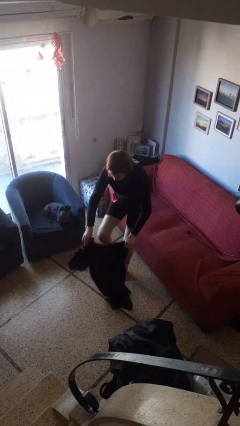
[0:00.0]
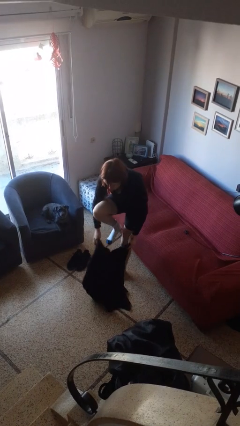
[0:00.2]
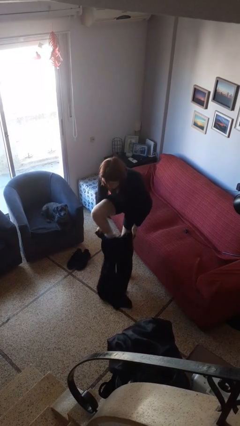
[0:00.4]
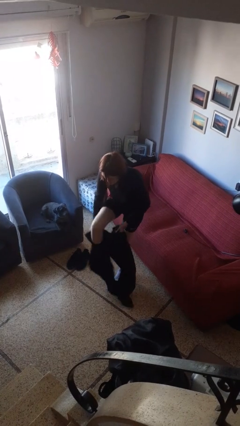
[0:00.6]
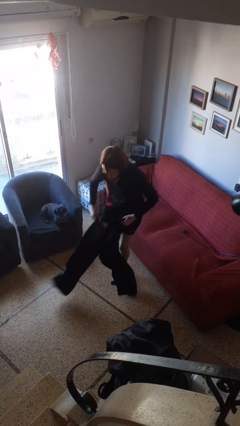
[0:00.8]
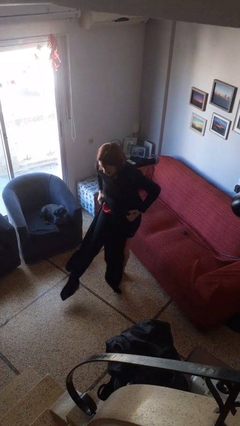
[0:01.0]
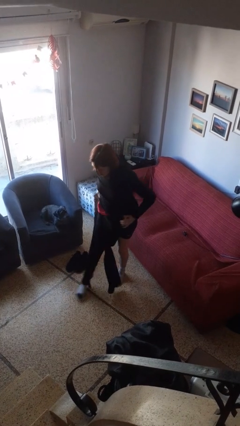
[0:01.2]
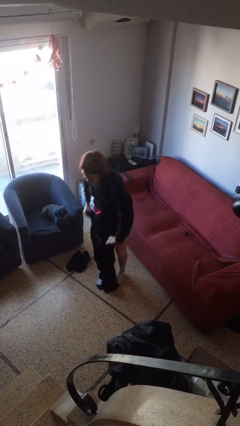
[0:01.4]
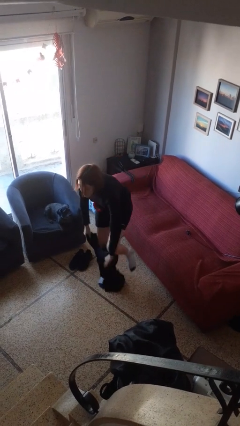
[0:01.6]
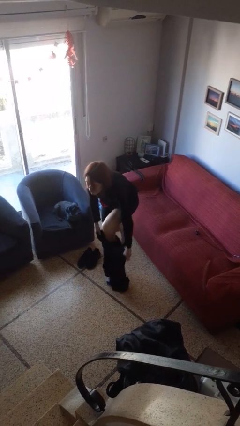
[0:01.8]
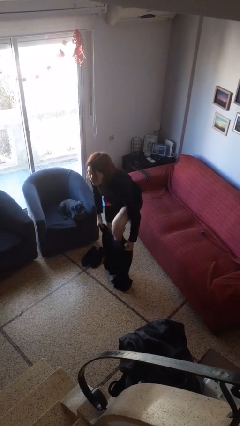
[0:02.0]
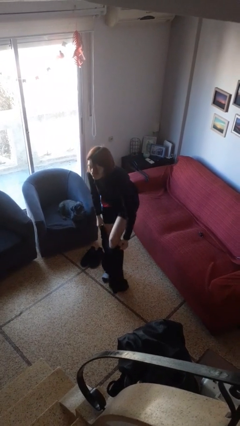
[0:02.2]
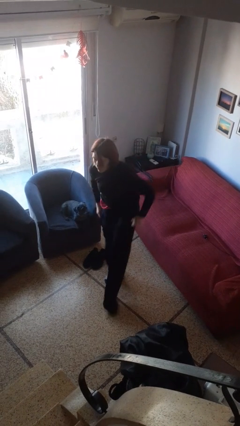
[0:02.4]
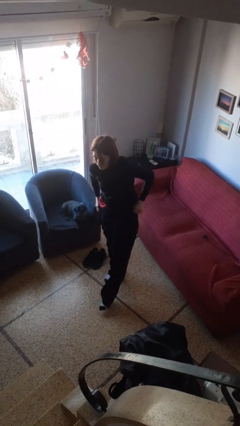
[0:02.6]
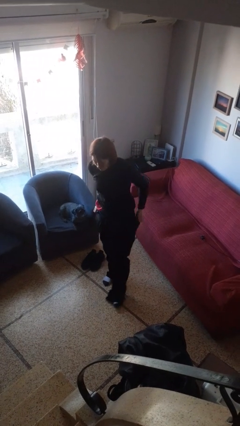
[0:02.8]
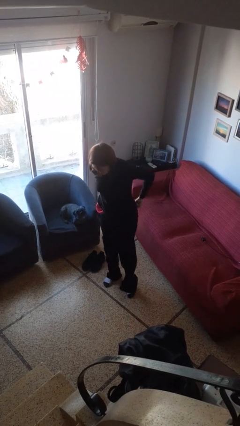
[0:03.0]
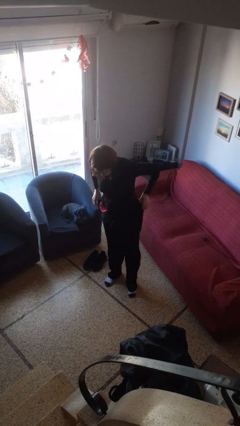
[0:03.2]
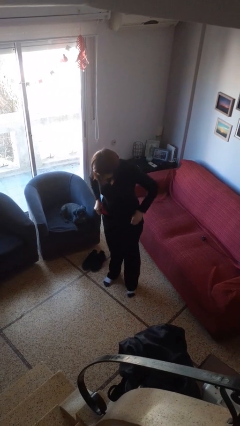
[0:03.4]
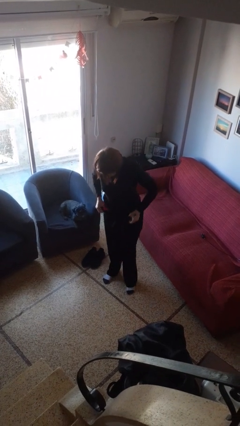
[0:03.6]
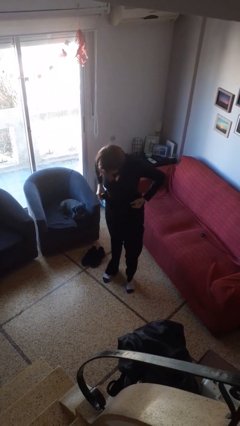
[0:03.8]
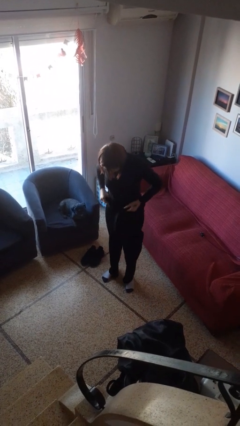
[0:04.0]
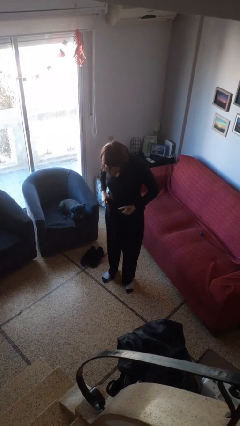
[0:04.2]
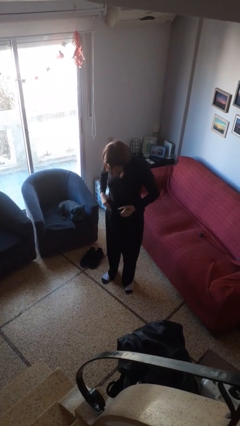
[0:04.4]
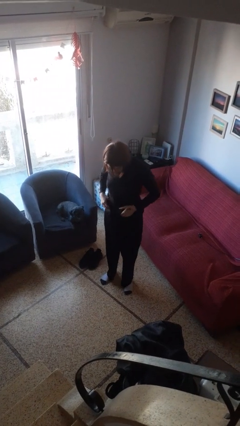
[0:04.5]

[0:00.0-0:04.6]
person puts on pants

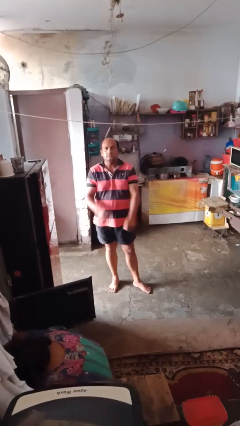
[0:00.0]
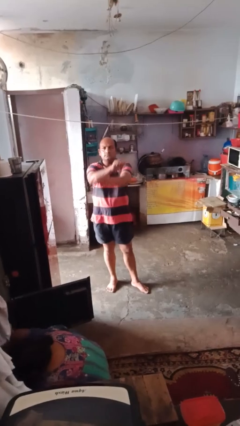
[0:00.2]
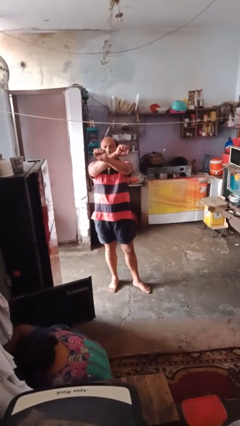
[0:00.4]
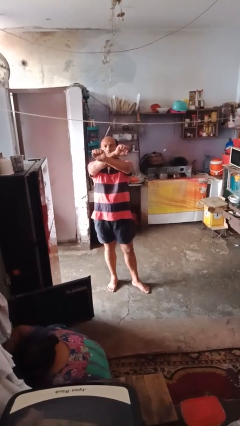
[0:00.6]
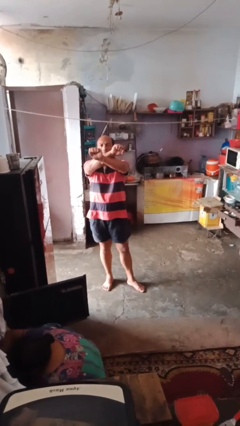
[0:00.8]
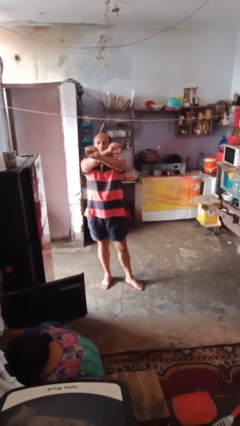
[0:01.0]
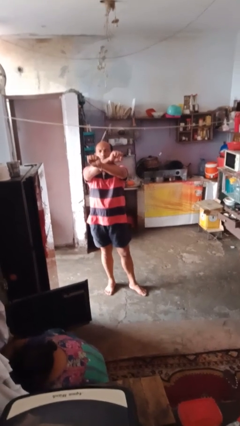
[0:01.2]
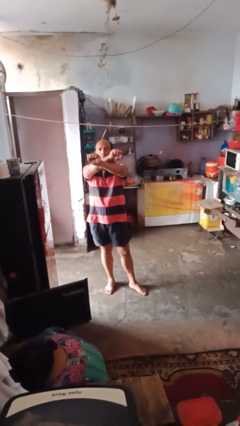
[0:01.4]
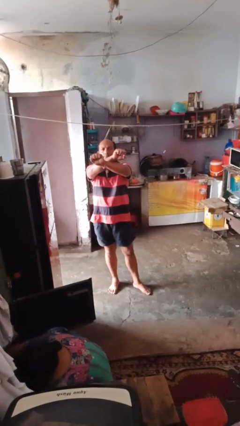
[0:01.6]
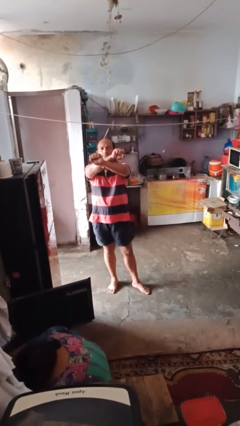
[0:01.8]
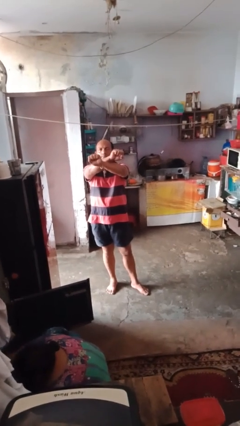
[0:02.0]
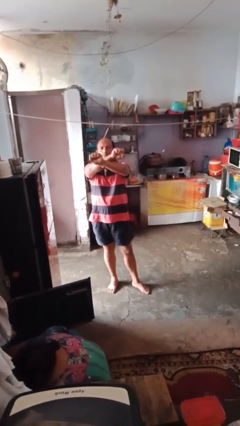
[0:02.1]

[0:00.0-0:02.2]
person gestures arms x

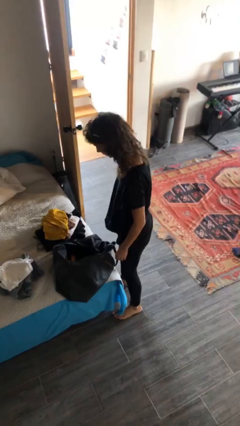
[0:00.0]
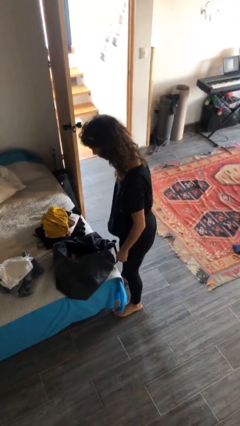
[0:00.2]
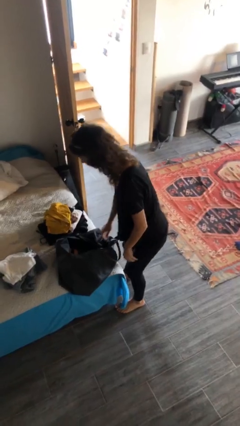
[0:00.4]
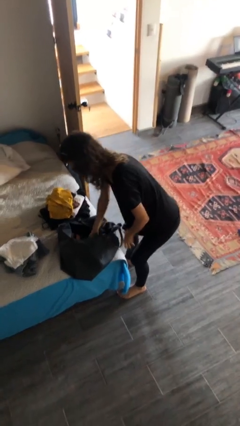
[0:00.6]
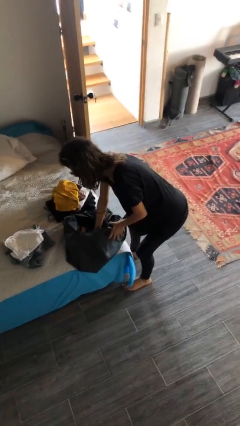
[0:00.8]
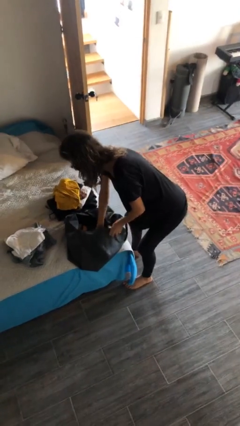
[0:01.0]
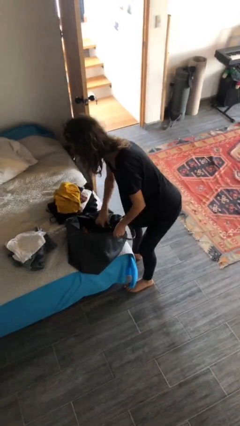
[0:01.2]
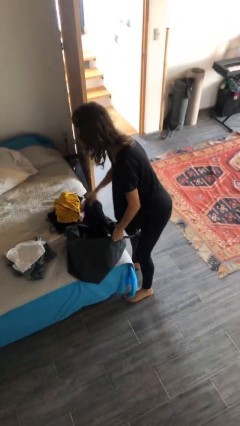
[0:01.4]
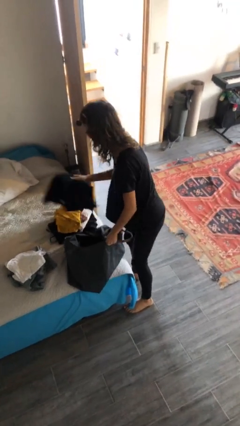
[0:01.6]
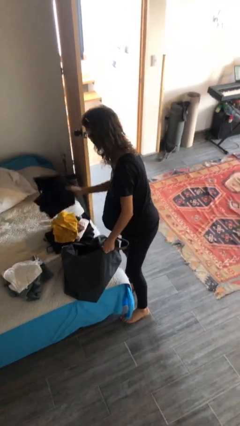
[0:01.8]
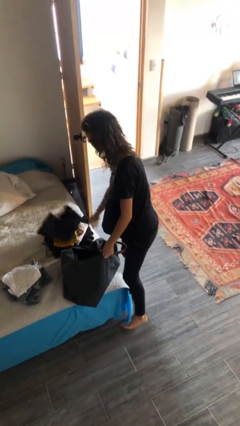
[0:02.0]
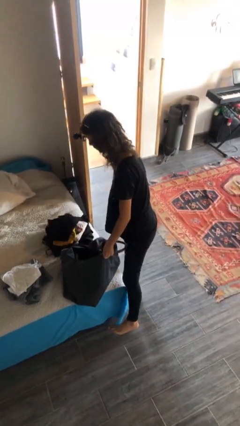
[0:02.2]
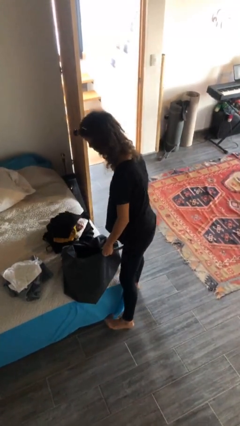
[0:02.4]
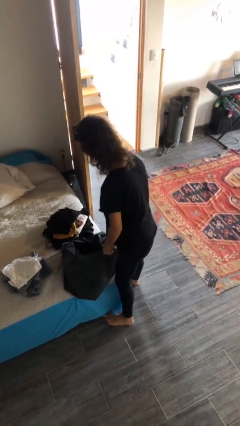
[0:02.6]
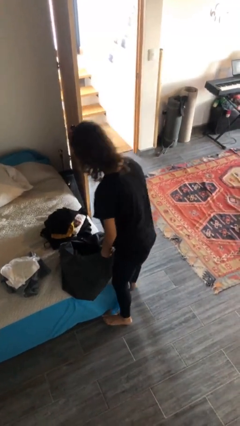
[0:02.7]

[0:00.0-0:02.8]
person unloads clothes from suitcase

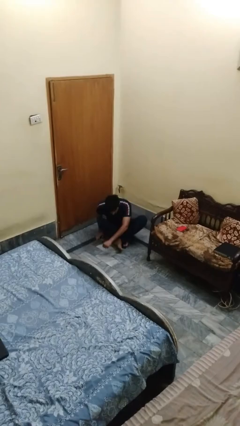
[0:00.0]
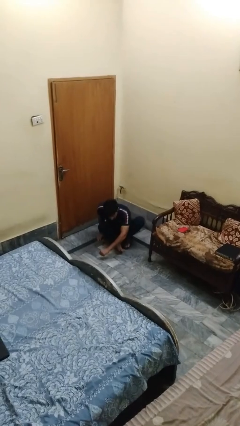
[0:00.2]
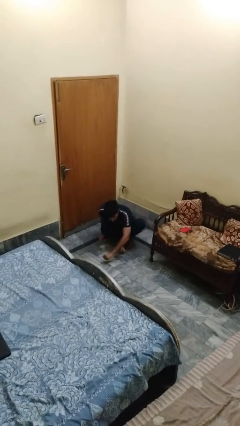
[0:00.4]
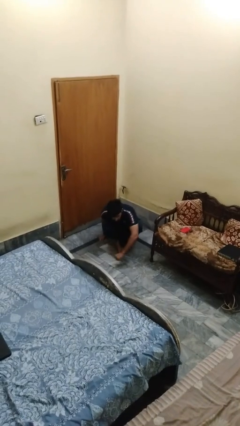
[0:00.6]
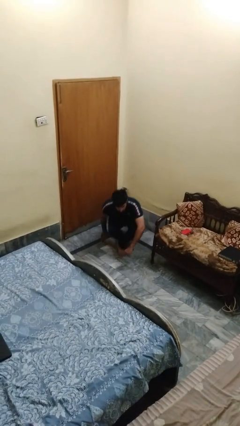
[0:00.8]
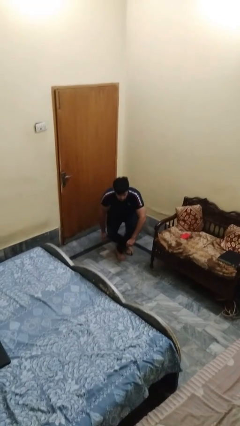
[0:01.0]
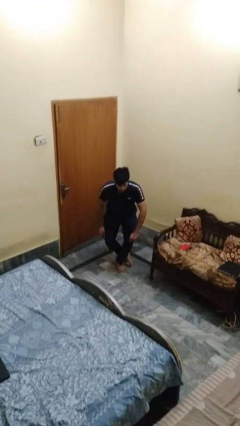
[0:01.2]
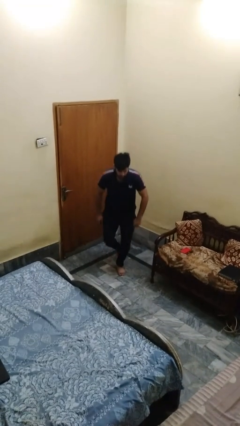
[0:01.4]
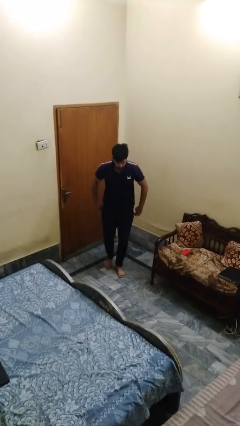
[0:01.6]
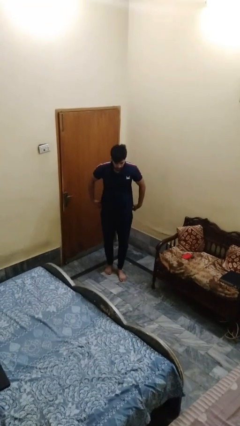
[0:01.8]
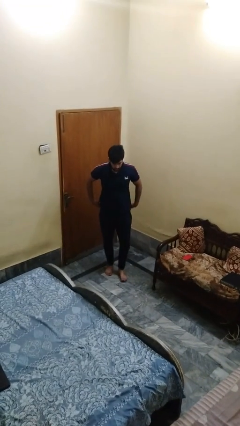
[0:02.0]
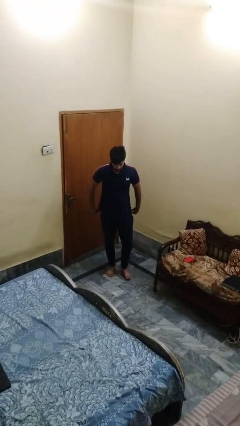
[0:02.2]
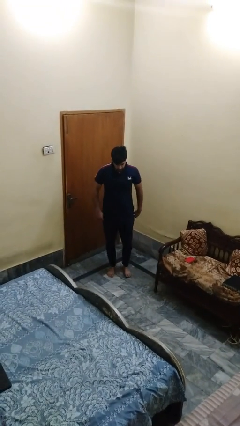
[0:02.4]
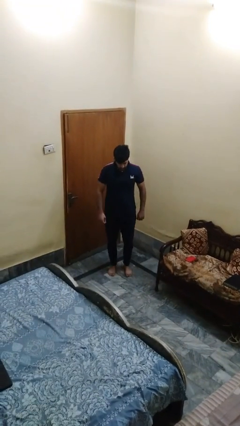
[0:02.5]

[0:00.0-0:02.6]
person stands up from floor

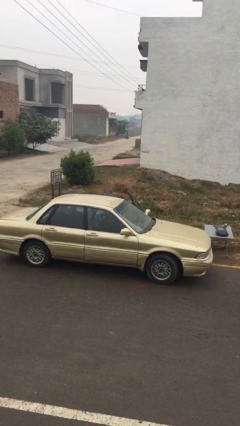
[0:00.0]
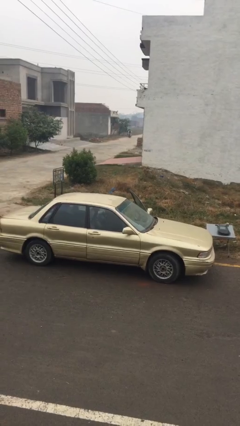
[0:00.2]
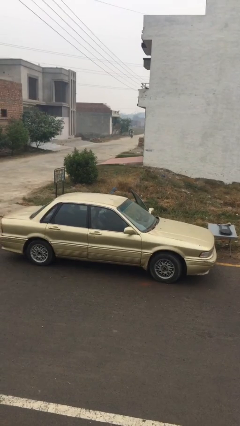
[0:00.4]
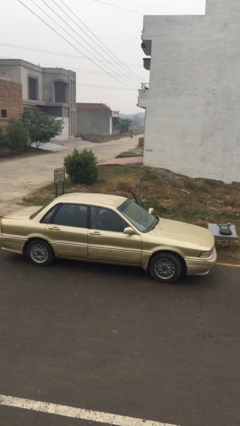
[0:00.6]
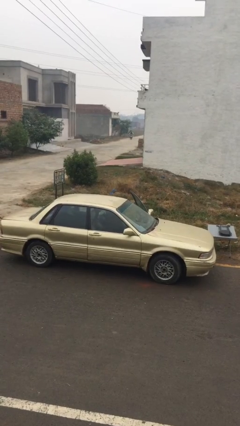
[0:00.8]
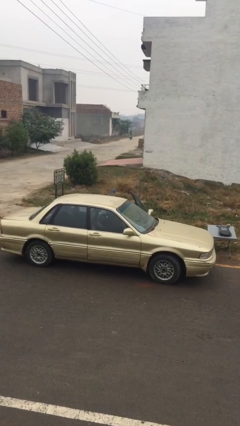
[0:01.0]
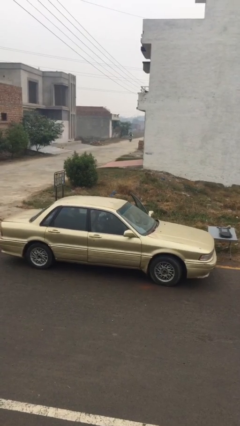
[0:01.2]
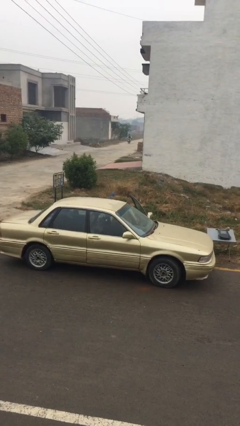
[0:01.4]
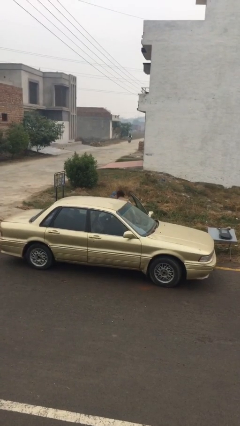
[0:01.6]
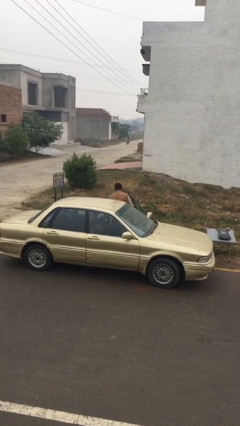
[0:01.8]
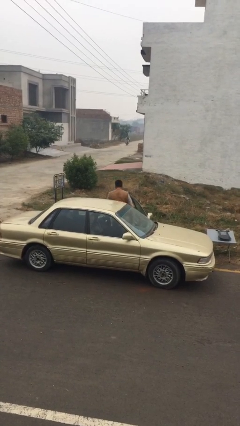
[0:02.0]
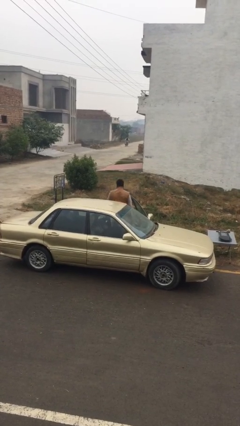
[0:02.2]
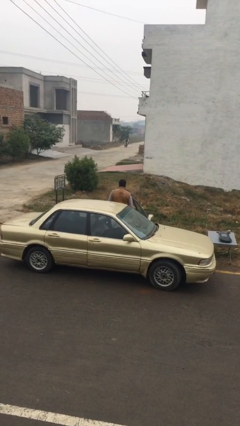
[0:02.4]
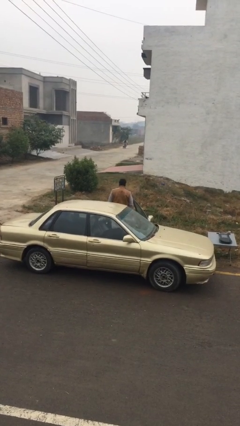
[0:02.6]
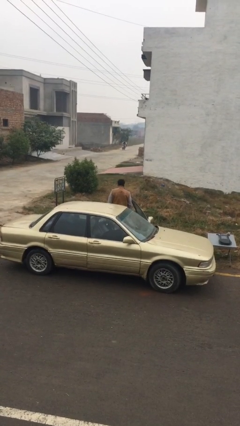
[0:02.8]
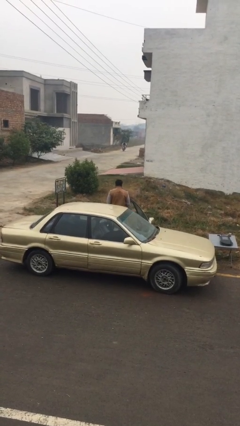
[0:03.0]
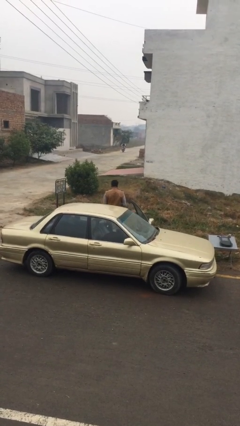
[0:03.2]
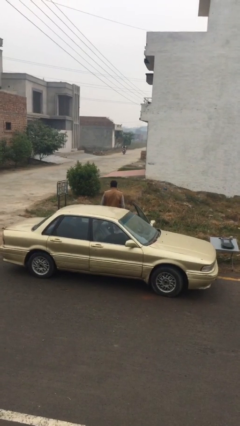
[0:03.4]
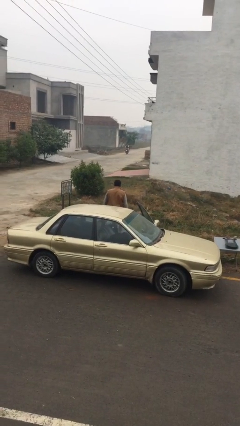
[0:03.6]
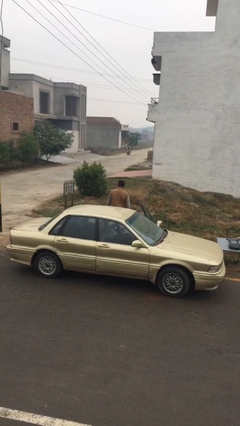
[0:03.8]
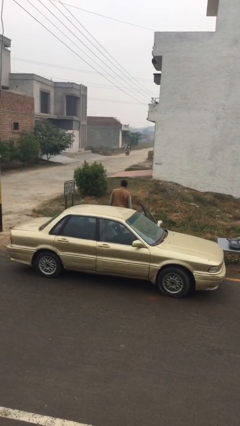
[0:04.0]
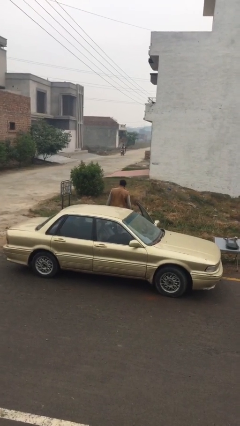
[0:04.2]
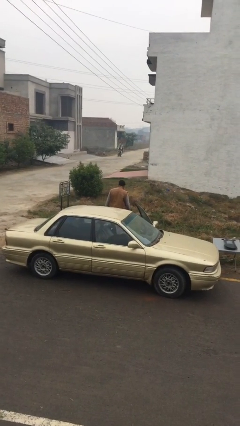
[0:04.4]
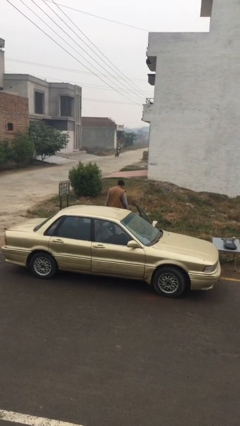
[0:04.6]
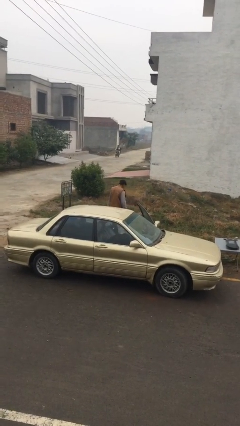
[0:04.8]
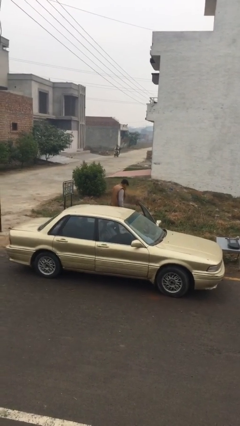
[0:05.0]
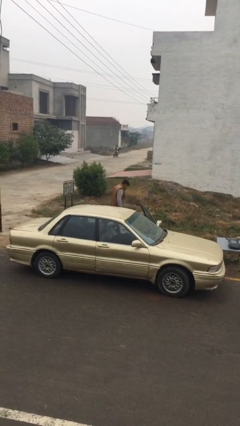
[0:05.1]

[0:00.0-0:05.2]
person exits car
